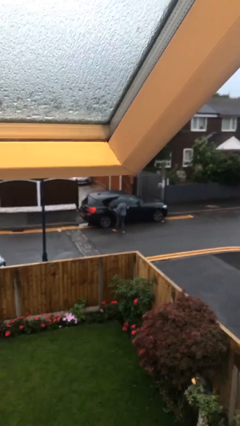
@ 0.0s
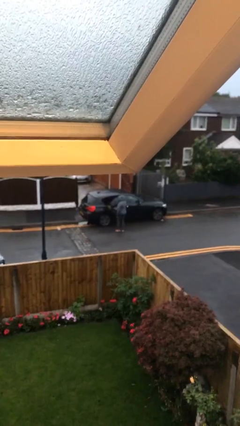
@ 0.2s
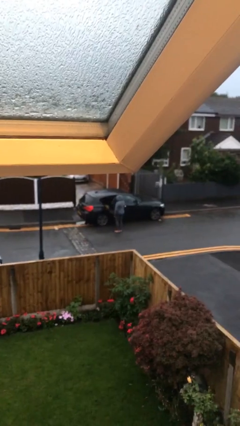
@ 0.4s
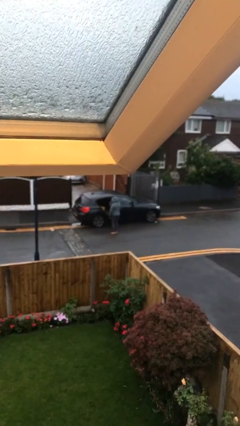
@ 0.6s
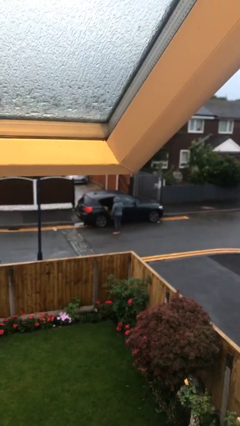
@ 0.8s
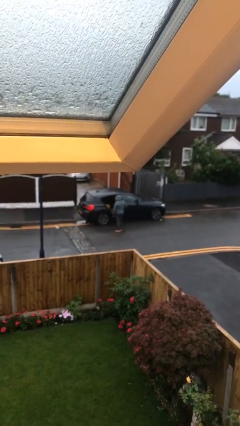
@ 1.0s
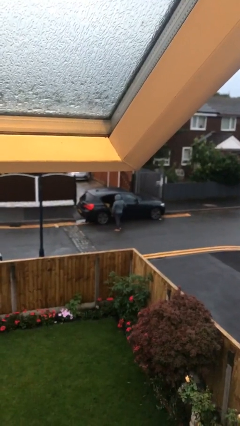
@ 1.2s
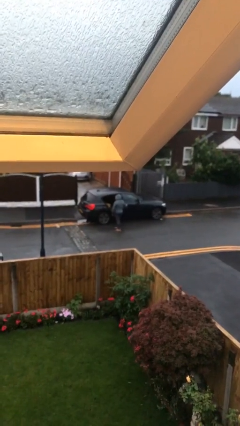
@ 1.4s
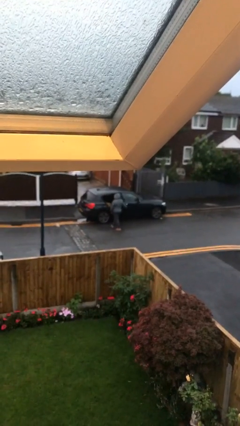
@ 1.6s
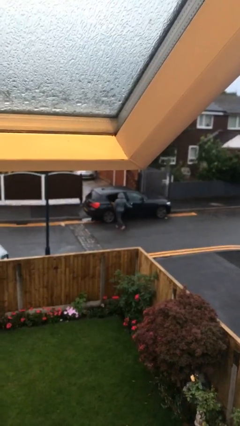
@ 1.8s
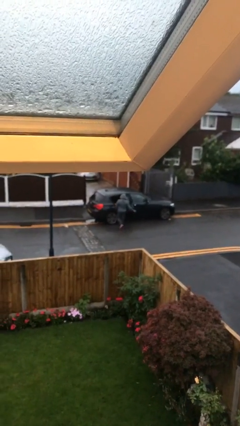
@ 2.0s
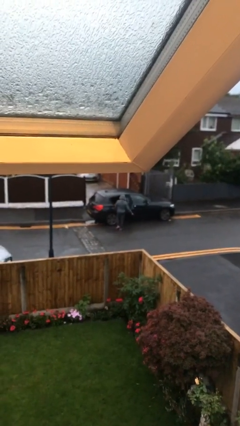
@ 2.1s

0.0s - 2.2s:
person opens car door

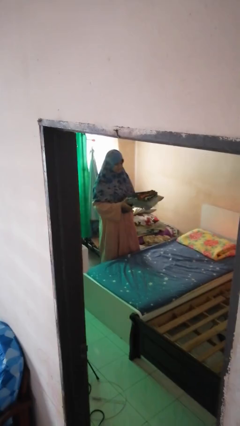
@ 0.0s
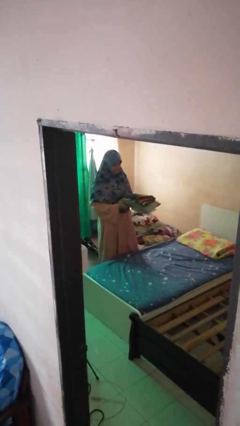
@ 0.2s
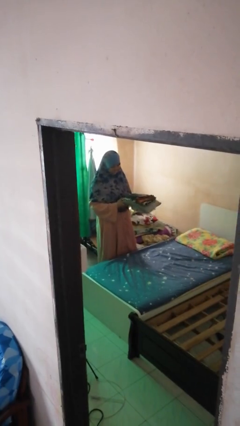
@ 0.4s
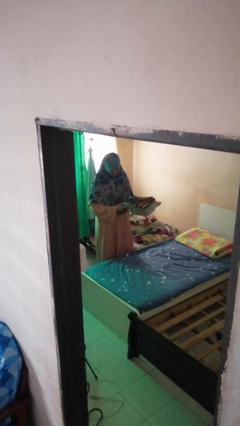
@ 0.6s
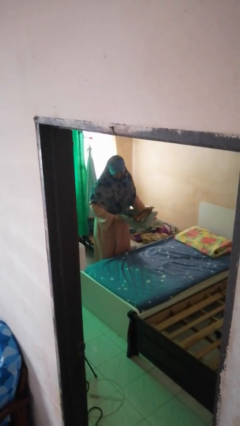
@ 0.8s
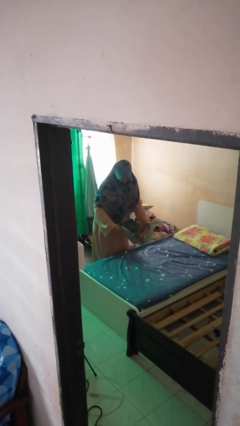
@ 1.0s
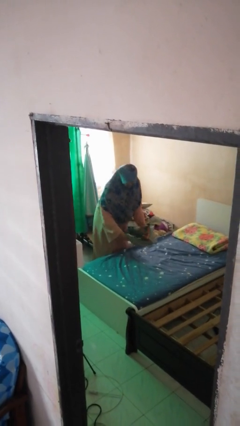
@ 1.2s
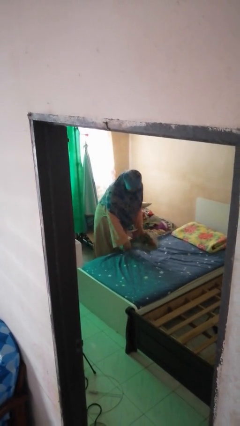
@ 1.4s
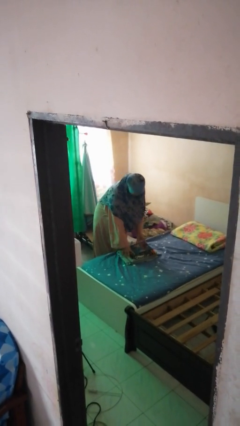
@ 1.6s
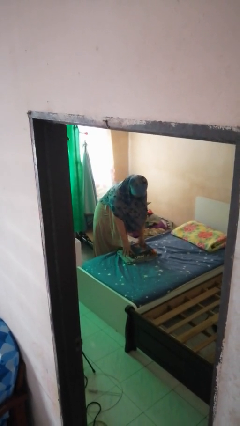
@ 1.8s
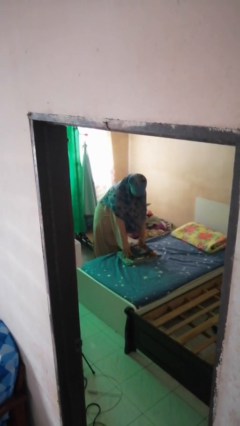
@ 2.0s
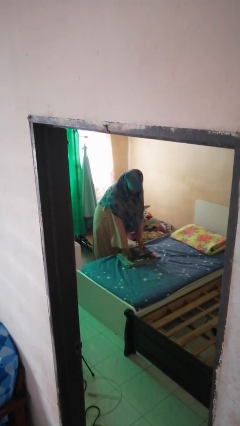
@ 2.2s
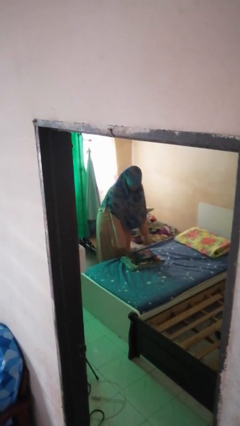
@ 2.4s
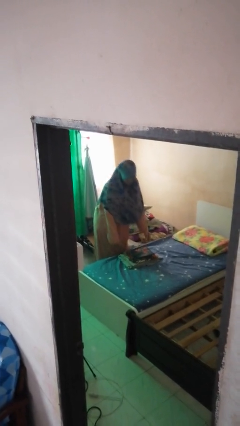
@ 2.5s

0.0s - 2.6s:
person puts down object on bed

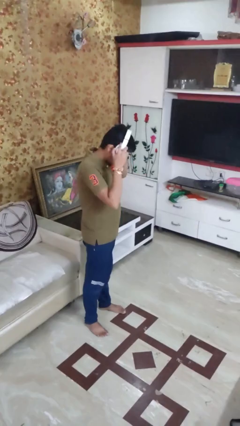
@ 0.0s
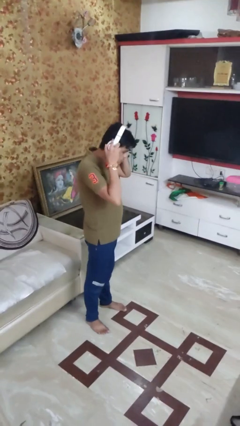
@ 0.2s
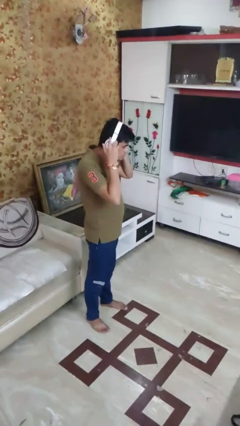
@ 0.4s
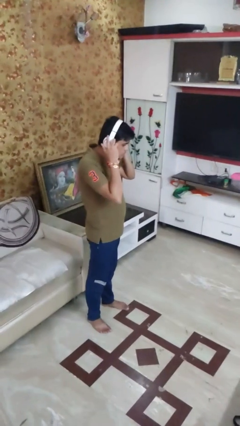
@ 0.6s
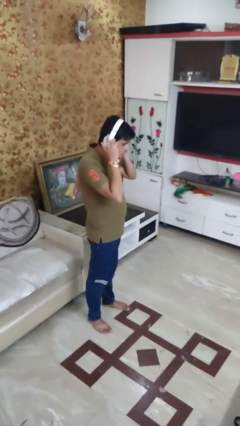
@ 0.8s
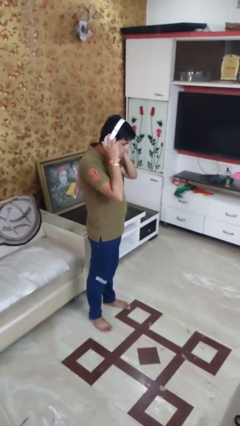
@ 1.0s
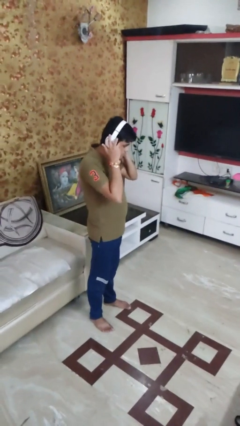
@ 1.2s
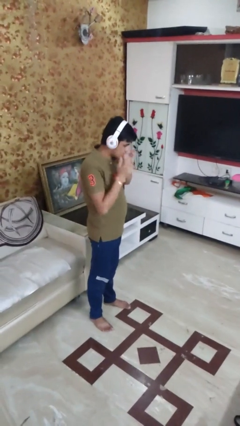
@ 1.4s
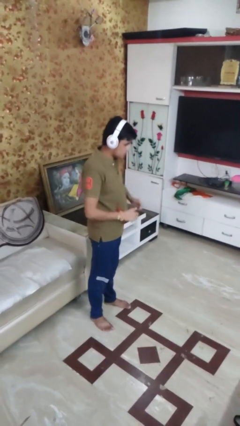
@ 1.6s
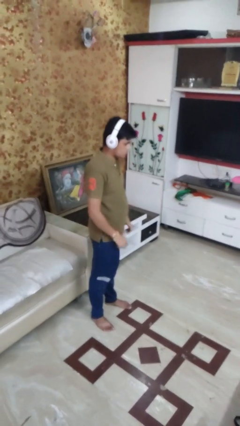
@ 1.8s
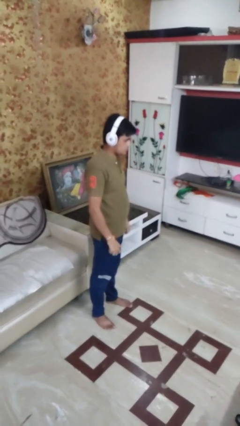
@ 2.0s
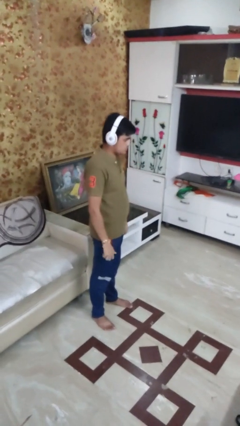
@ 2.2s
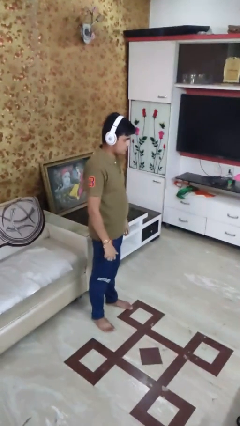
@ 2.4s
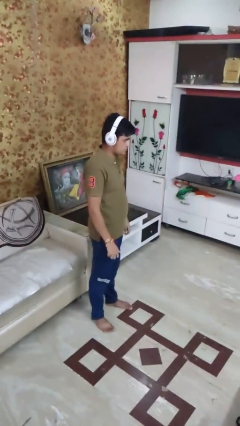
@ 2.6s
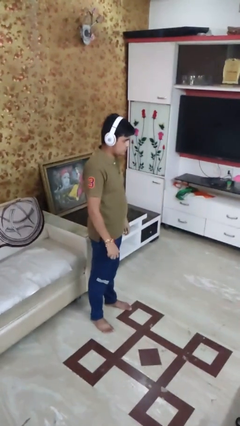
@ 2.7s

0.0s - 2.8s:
person puts on headphones

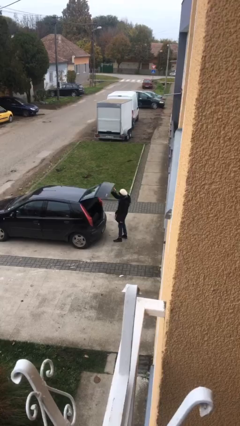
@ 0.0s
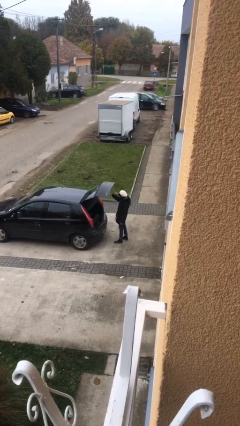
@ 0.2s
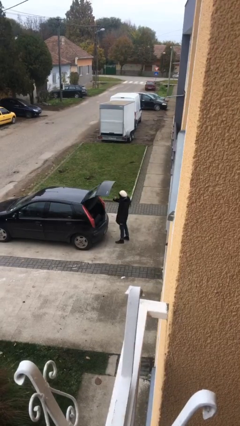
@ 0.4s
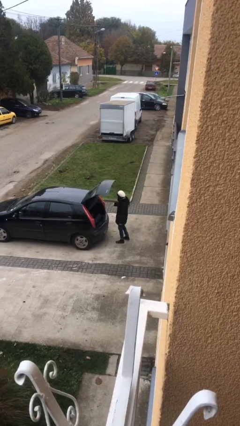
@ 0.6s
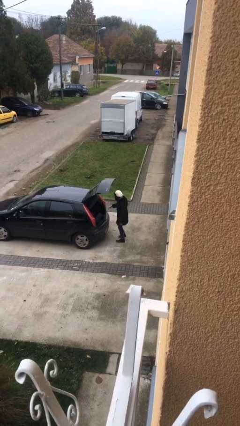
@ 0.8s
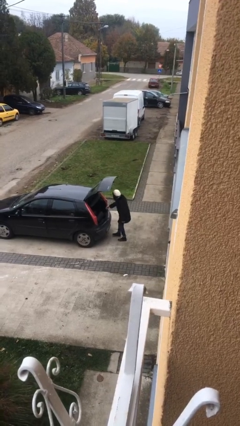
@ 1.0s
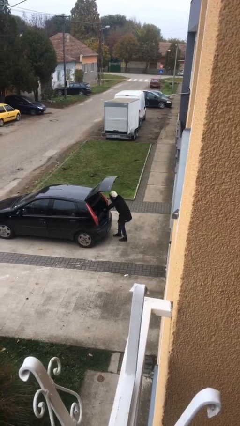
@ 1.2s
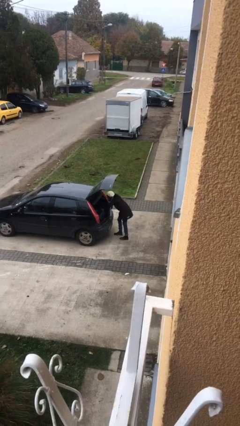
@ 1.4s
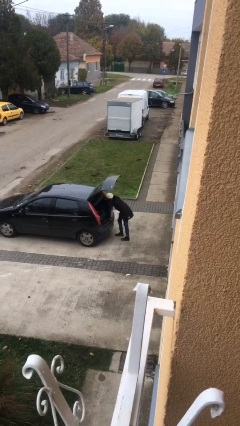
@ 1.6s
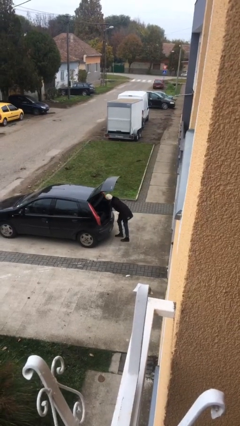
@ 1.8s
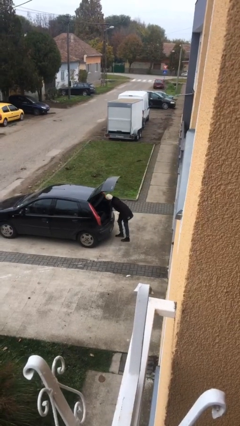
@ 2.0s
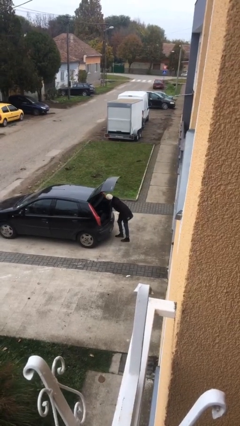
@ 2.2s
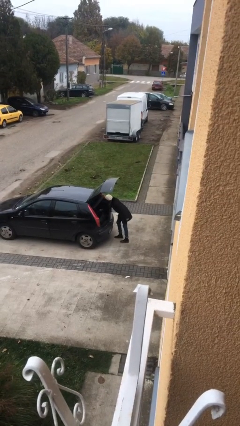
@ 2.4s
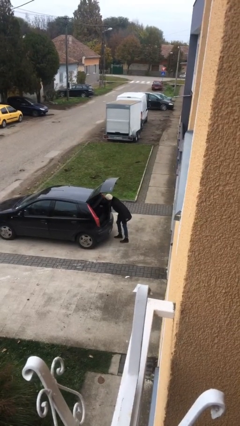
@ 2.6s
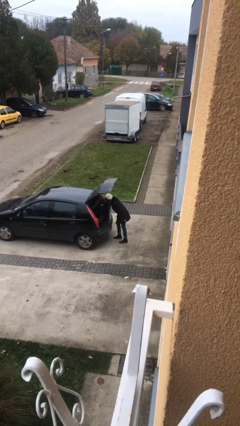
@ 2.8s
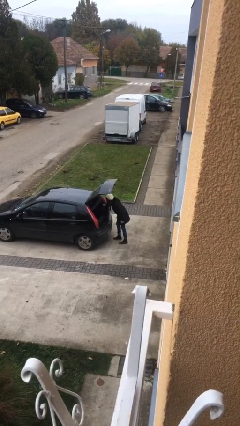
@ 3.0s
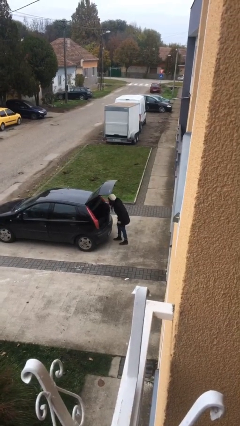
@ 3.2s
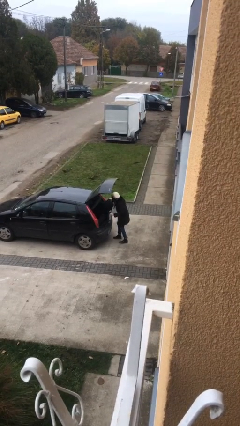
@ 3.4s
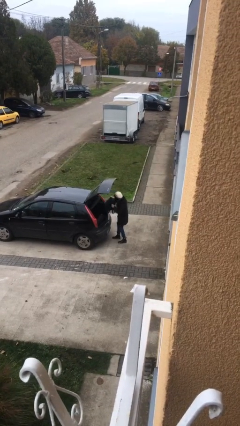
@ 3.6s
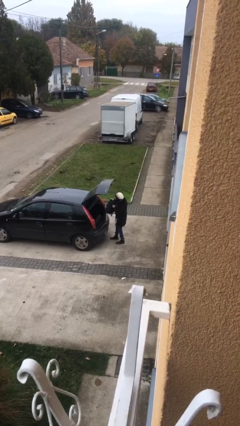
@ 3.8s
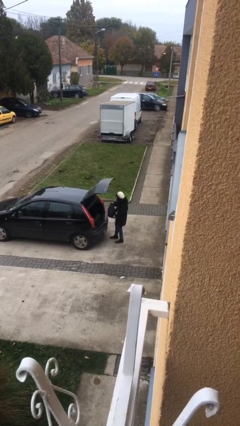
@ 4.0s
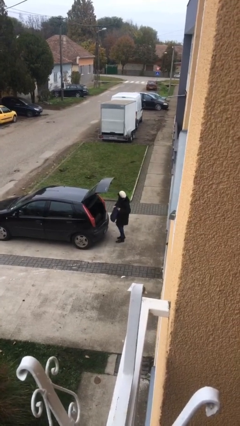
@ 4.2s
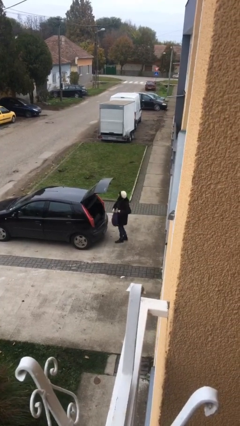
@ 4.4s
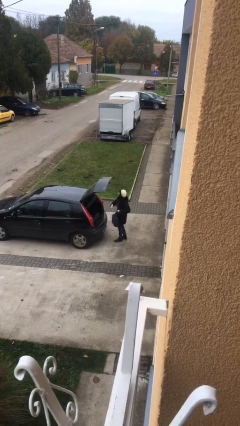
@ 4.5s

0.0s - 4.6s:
person unloads car

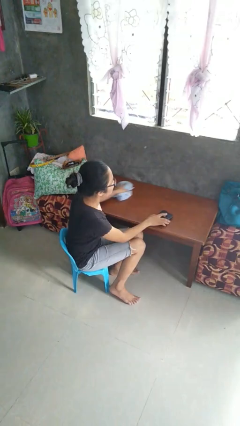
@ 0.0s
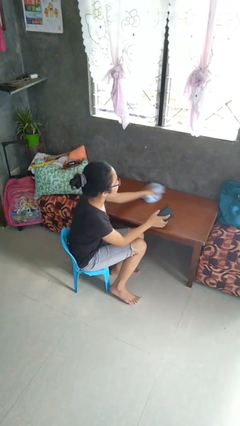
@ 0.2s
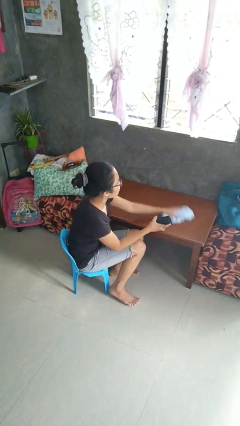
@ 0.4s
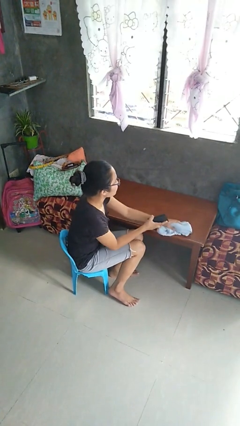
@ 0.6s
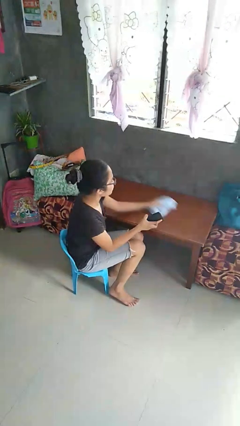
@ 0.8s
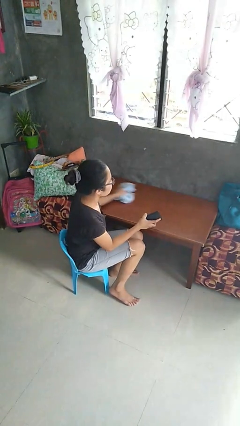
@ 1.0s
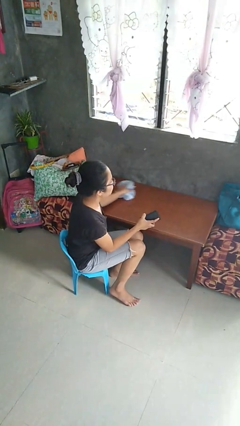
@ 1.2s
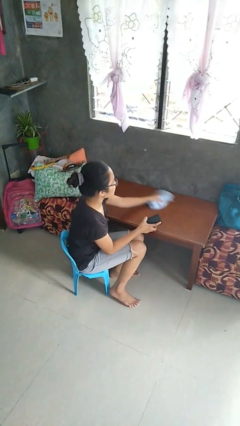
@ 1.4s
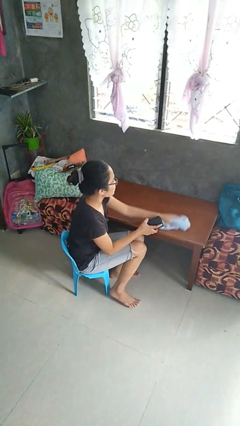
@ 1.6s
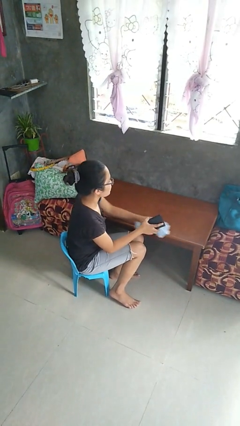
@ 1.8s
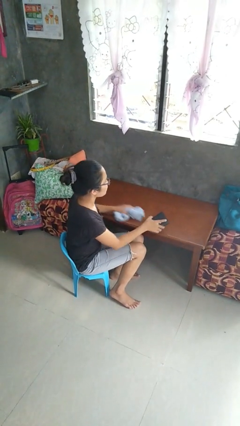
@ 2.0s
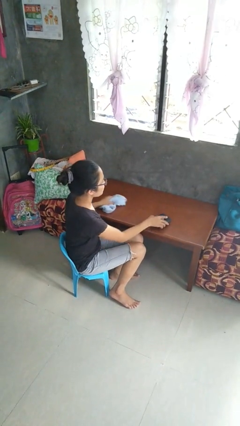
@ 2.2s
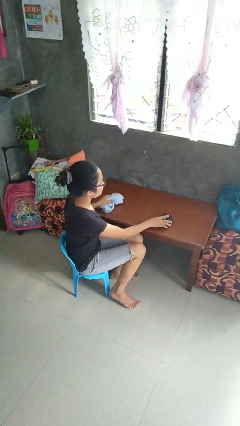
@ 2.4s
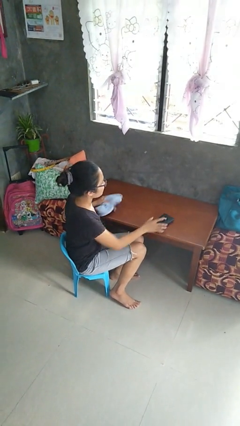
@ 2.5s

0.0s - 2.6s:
person cleans table with rag

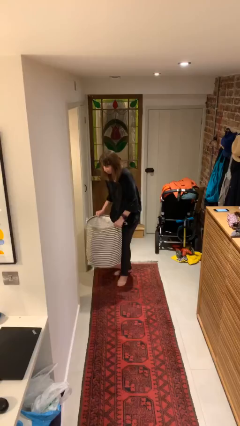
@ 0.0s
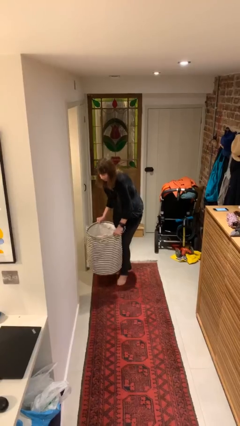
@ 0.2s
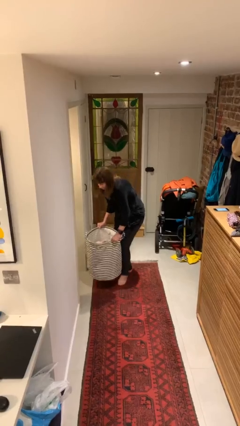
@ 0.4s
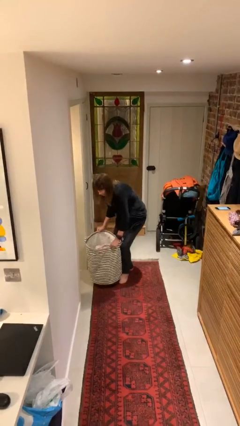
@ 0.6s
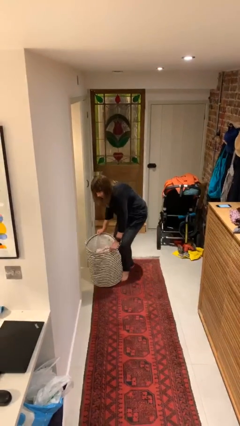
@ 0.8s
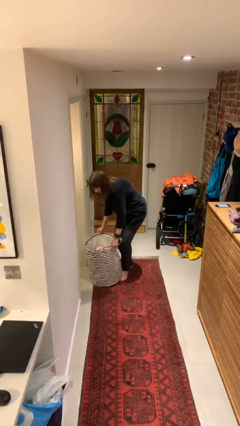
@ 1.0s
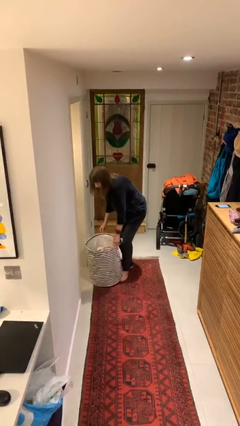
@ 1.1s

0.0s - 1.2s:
person puts down object on floor

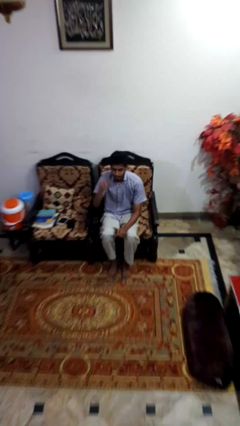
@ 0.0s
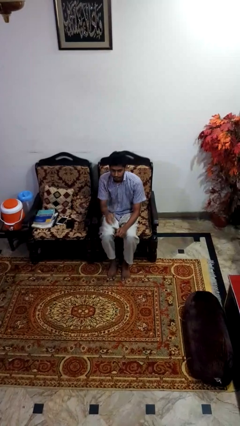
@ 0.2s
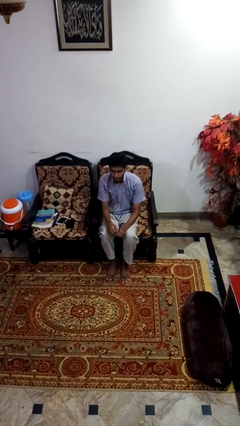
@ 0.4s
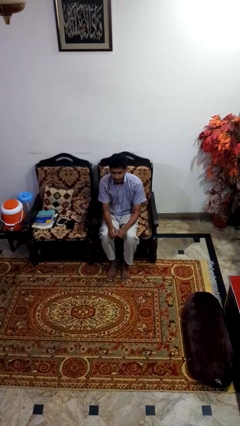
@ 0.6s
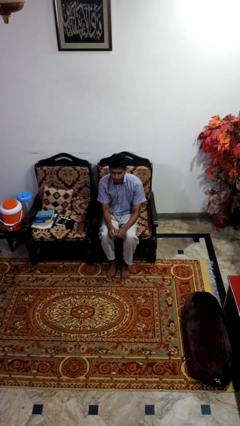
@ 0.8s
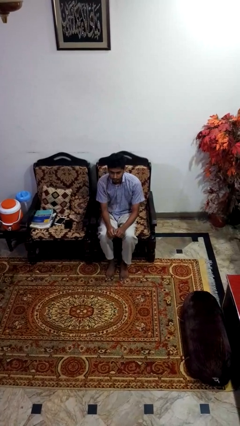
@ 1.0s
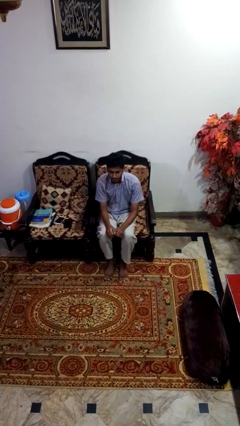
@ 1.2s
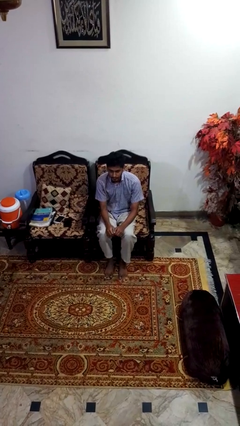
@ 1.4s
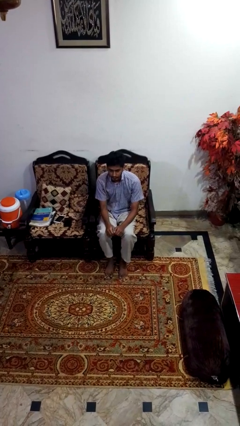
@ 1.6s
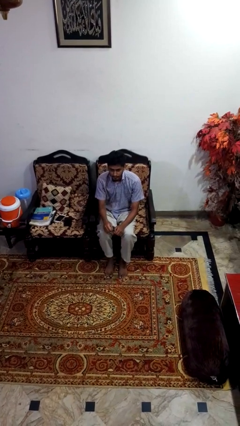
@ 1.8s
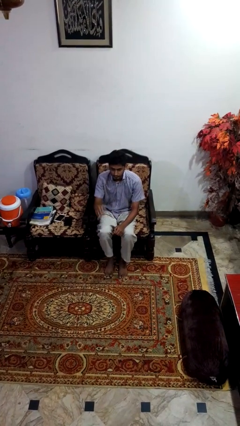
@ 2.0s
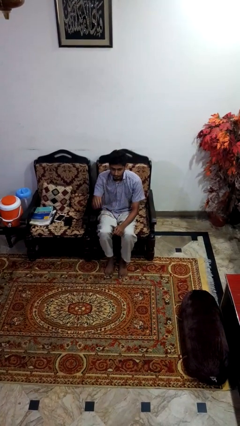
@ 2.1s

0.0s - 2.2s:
person gestures lower hand
